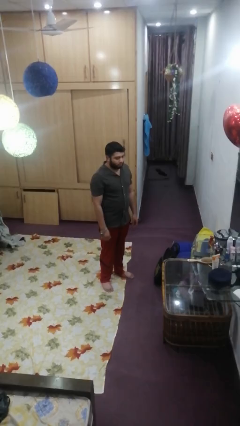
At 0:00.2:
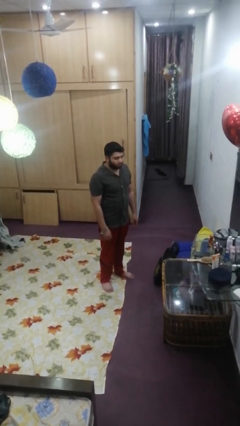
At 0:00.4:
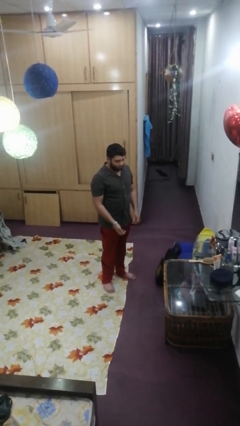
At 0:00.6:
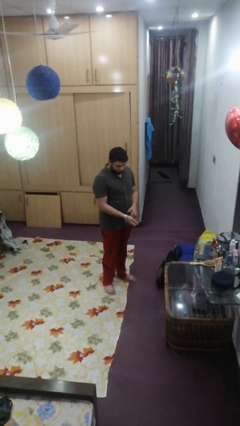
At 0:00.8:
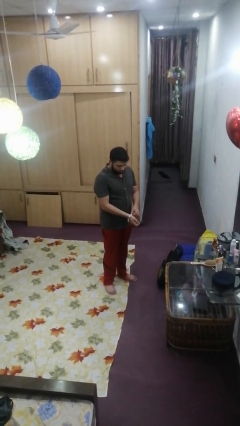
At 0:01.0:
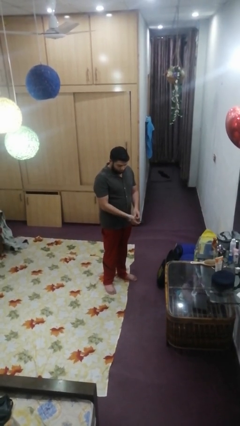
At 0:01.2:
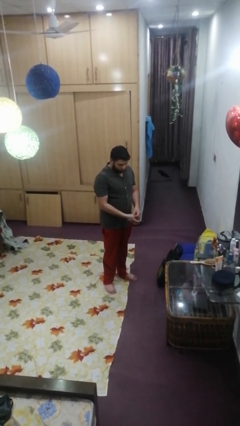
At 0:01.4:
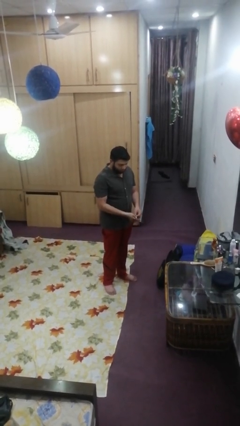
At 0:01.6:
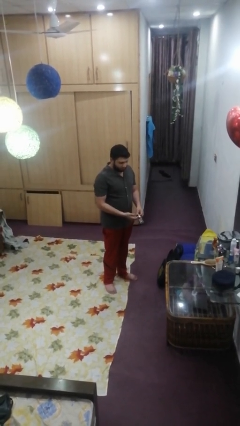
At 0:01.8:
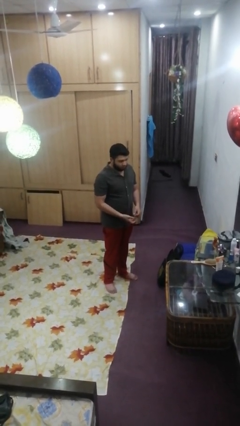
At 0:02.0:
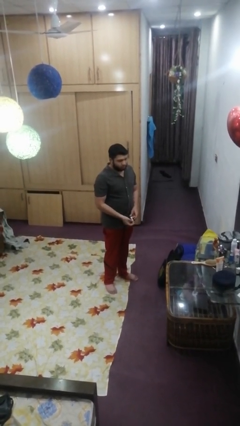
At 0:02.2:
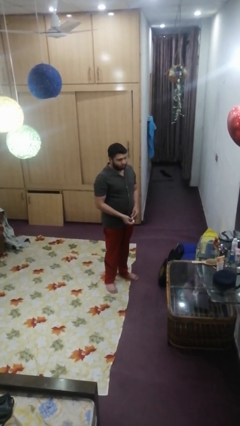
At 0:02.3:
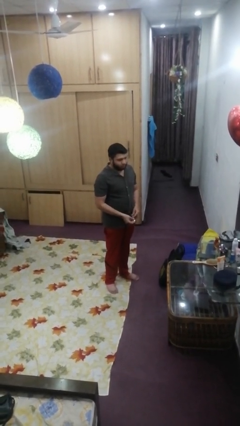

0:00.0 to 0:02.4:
person takes off wristwatch

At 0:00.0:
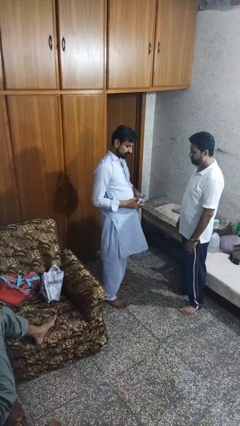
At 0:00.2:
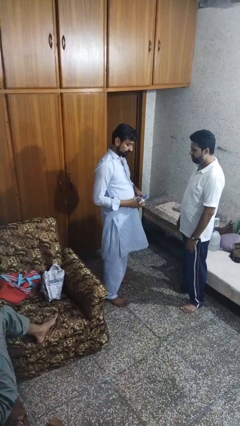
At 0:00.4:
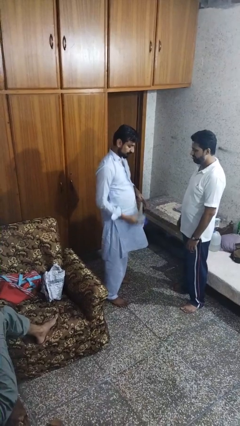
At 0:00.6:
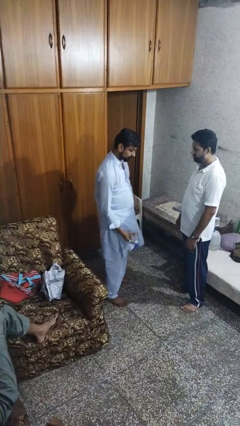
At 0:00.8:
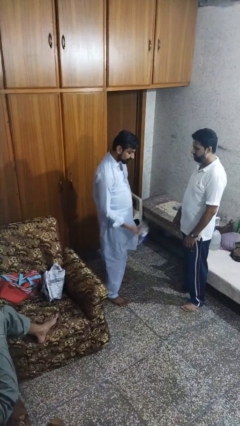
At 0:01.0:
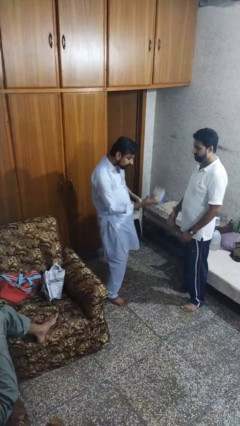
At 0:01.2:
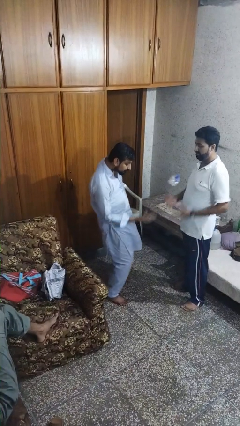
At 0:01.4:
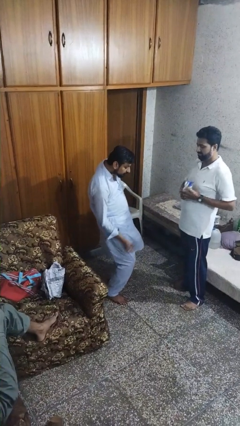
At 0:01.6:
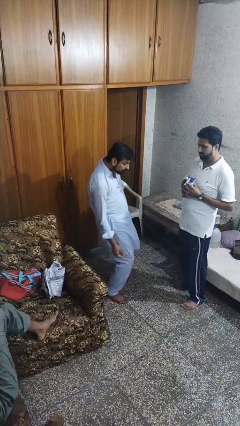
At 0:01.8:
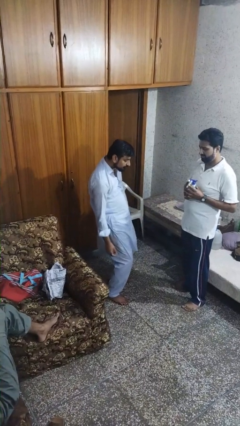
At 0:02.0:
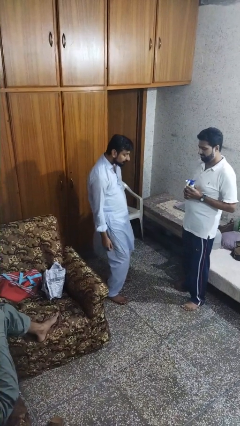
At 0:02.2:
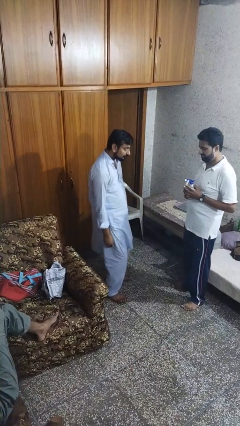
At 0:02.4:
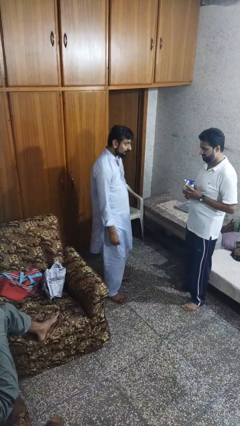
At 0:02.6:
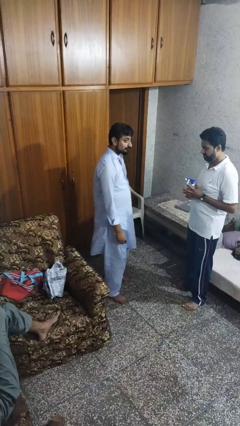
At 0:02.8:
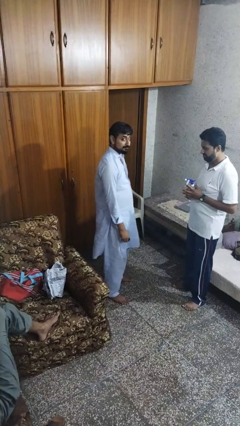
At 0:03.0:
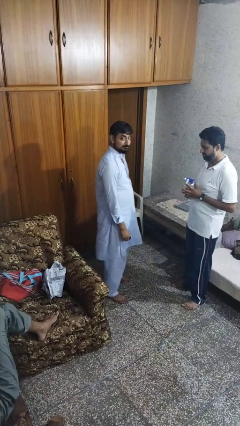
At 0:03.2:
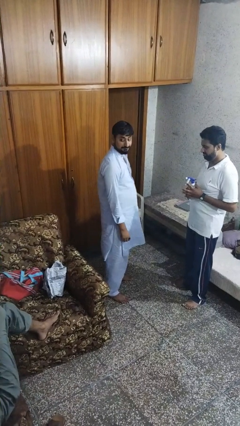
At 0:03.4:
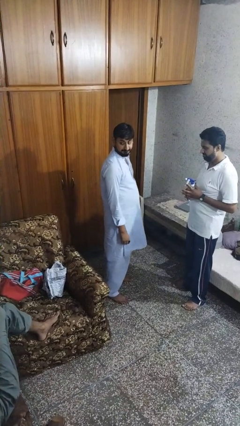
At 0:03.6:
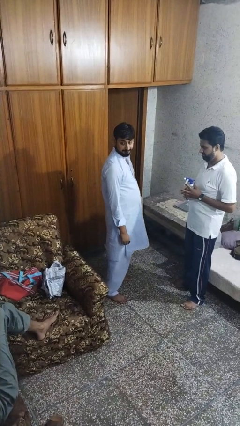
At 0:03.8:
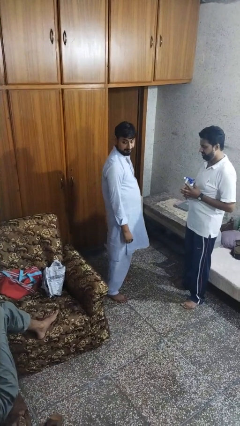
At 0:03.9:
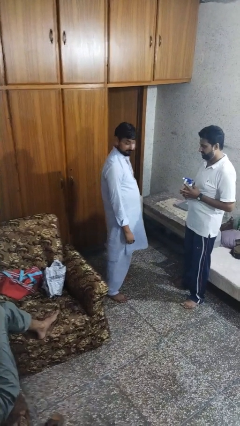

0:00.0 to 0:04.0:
person throws object to person

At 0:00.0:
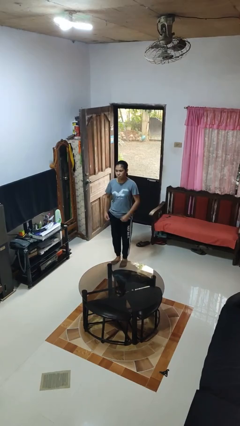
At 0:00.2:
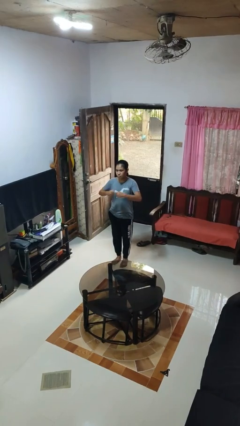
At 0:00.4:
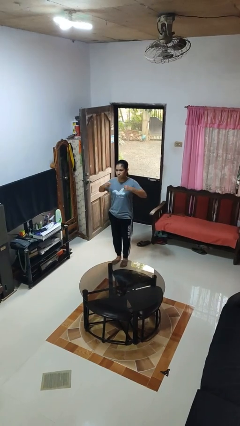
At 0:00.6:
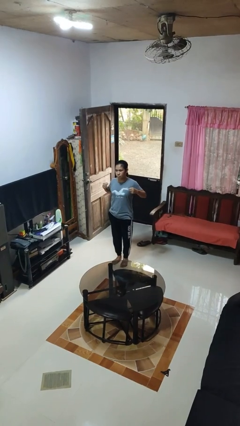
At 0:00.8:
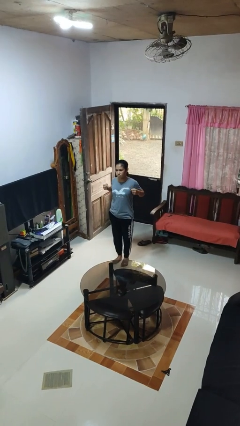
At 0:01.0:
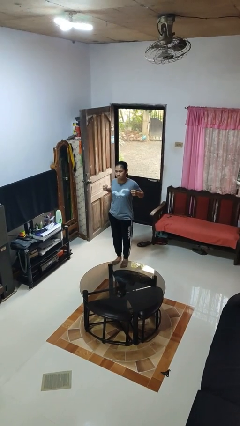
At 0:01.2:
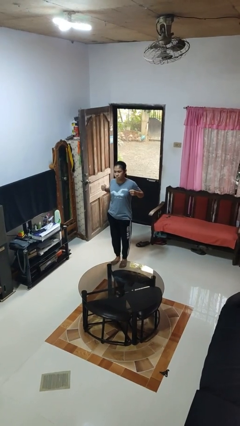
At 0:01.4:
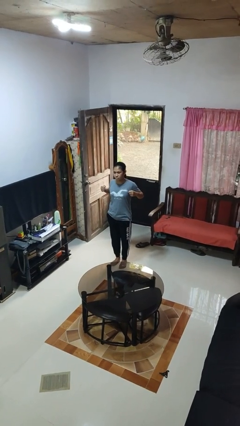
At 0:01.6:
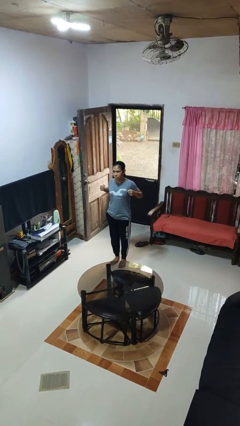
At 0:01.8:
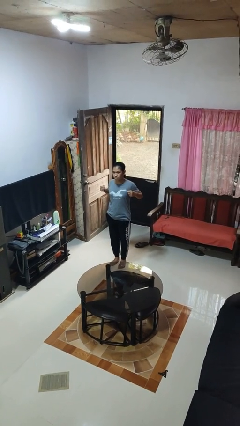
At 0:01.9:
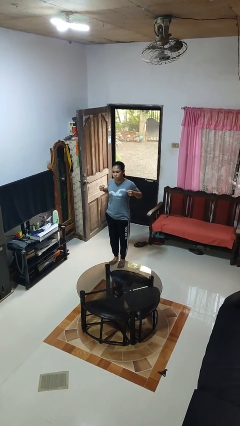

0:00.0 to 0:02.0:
person gestures zoom in

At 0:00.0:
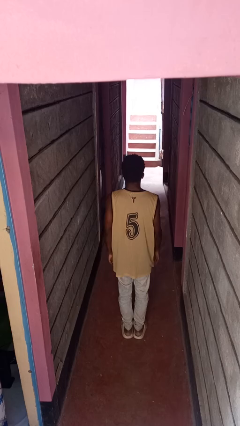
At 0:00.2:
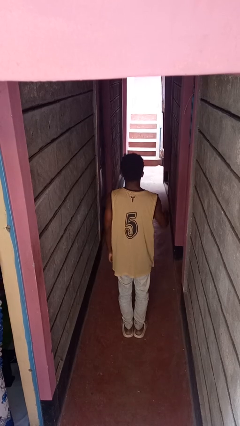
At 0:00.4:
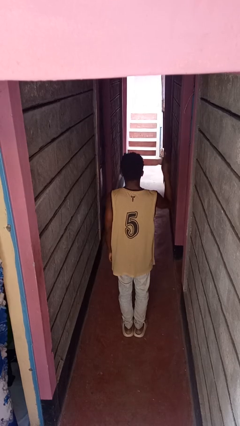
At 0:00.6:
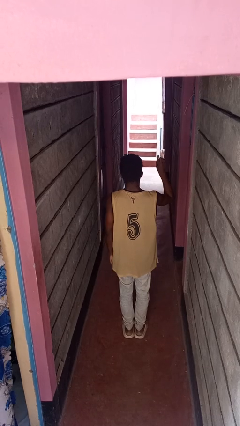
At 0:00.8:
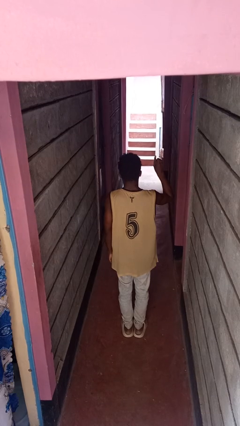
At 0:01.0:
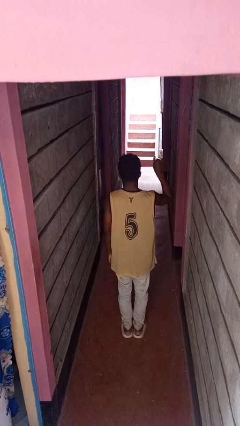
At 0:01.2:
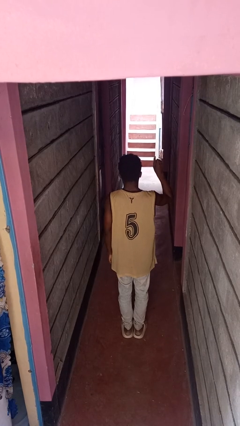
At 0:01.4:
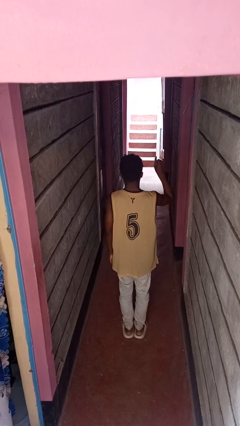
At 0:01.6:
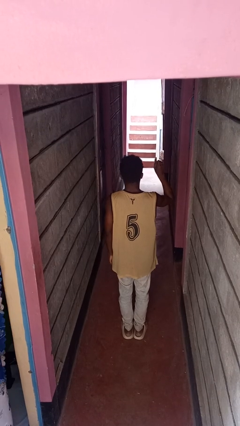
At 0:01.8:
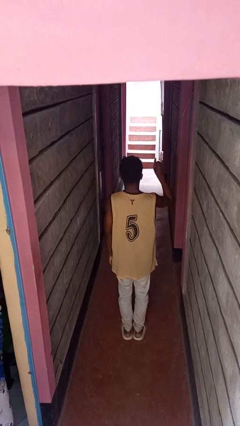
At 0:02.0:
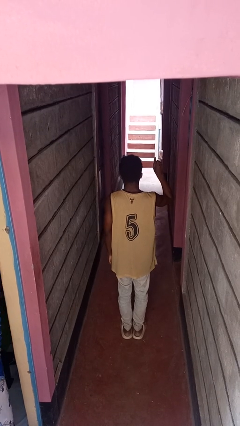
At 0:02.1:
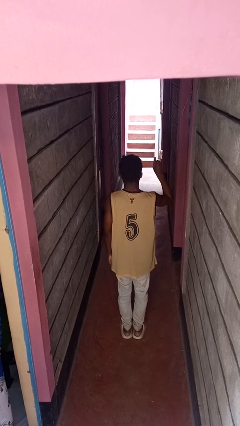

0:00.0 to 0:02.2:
person gestures number one

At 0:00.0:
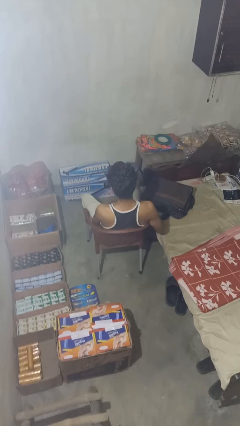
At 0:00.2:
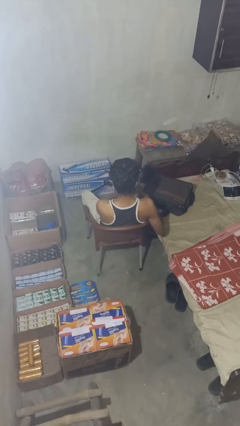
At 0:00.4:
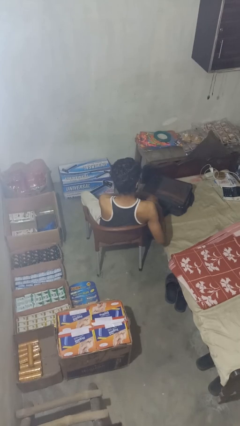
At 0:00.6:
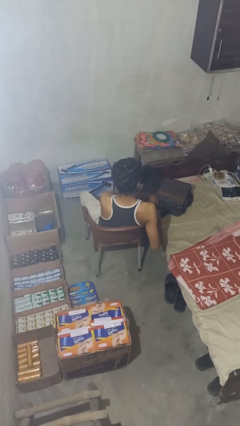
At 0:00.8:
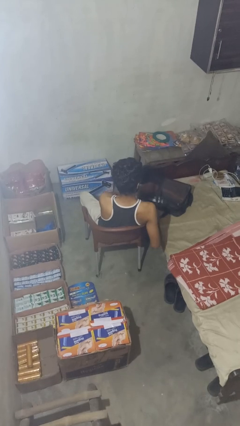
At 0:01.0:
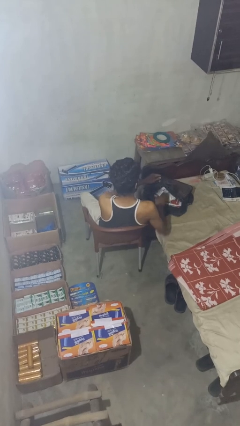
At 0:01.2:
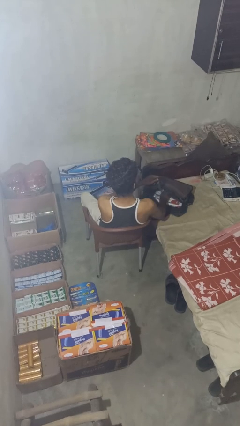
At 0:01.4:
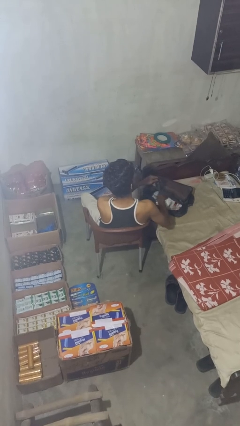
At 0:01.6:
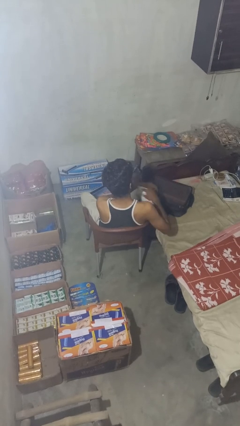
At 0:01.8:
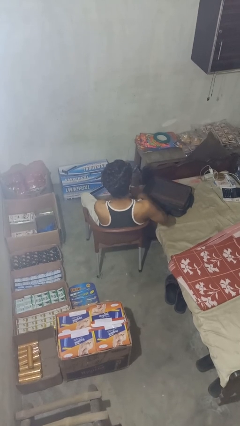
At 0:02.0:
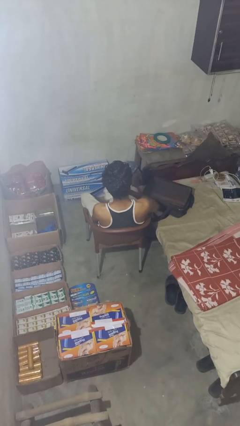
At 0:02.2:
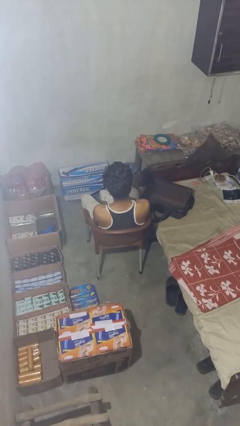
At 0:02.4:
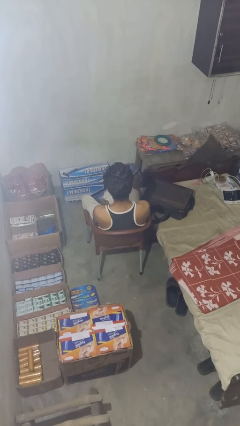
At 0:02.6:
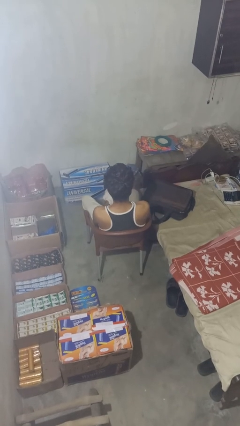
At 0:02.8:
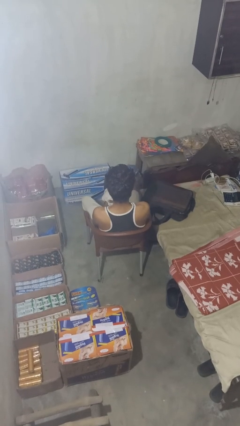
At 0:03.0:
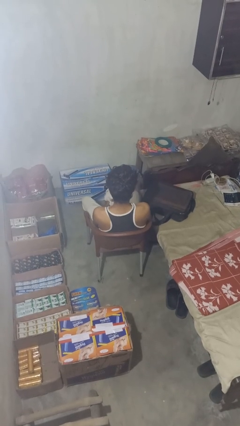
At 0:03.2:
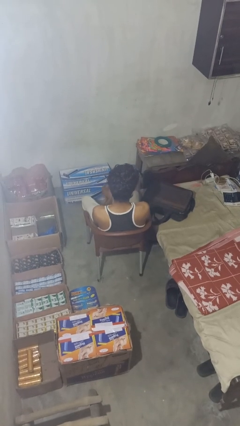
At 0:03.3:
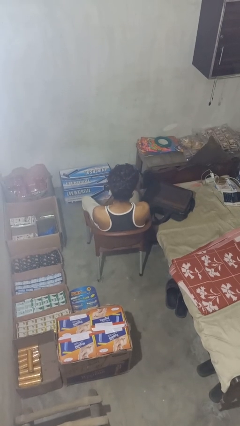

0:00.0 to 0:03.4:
person unloads clothes from suitcase

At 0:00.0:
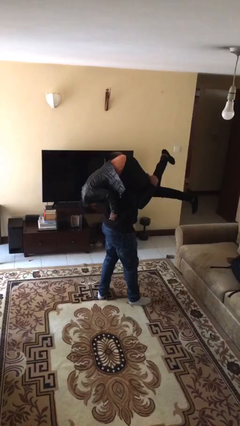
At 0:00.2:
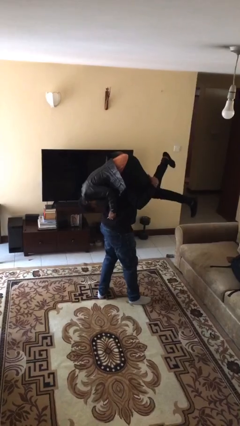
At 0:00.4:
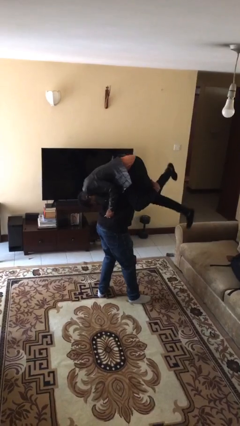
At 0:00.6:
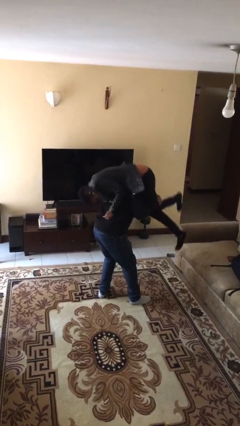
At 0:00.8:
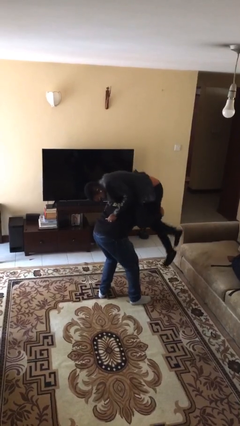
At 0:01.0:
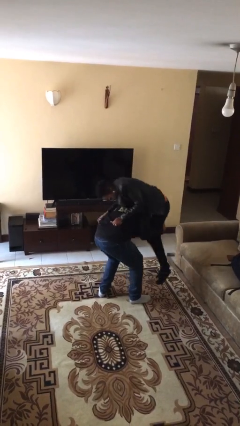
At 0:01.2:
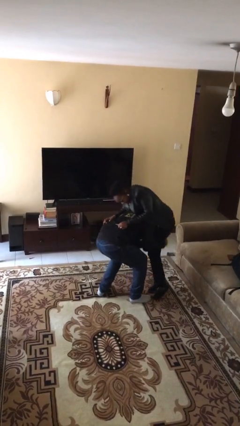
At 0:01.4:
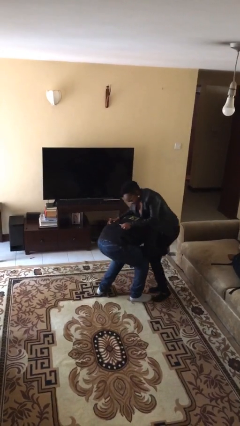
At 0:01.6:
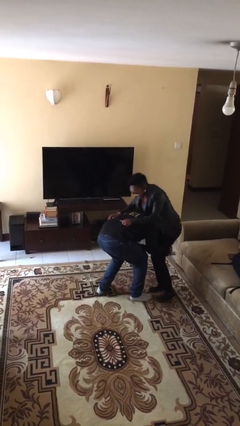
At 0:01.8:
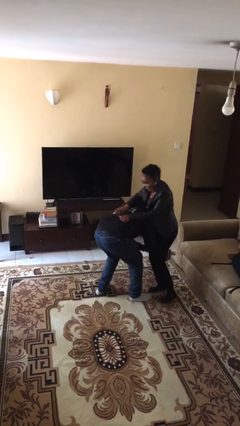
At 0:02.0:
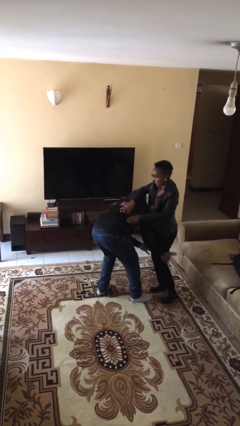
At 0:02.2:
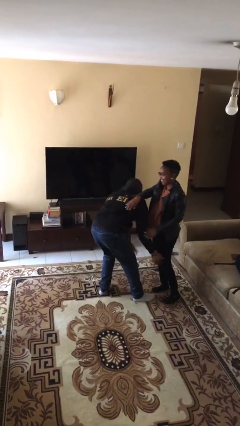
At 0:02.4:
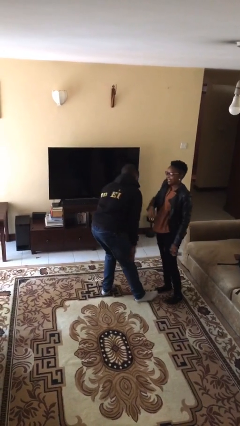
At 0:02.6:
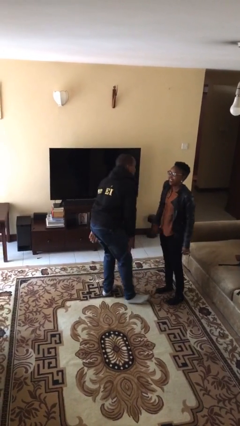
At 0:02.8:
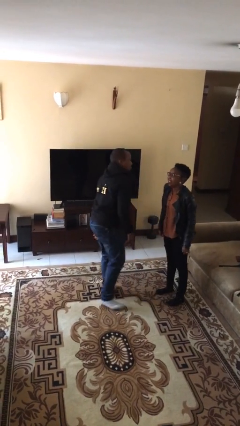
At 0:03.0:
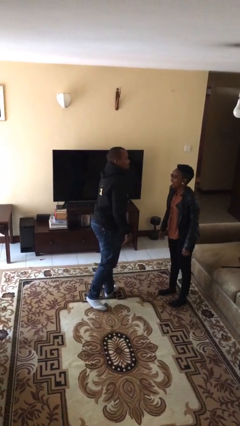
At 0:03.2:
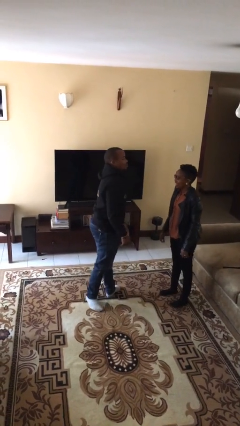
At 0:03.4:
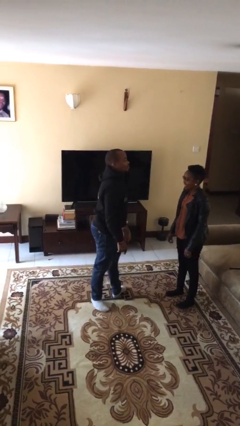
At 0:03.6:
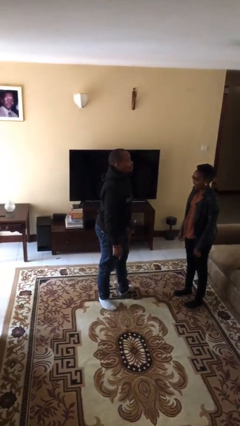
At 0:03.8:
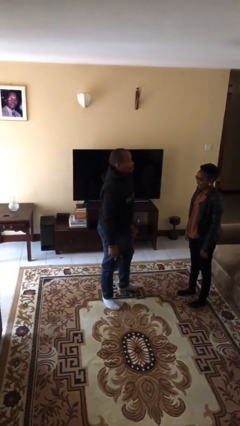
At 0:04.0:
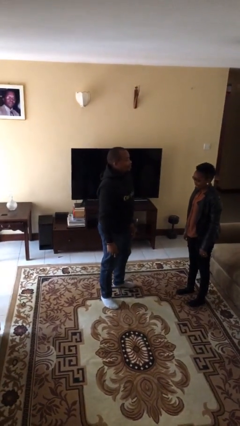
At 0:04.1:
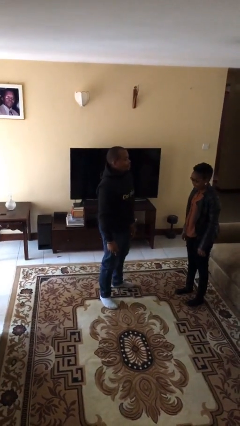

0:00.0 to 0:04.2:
person puts down person
